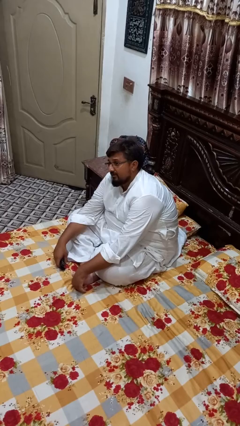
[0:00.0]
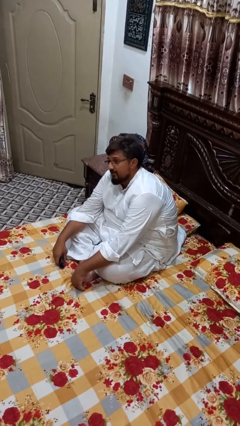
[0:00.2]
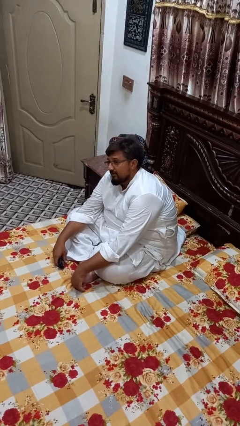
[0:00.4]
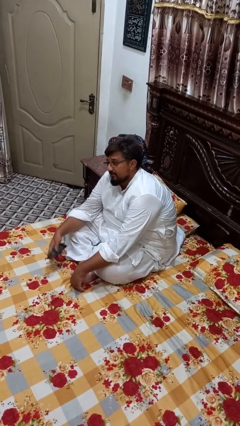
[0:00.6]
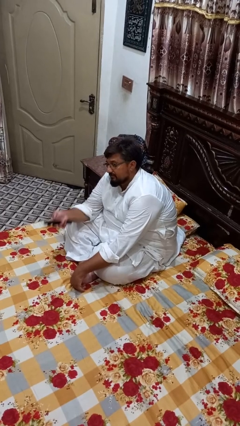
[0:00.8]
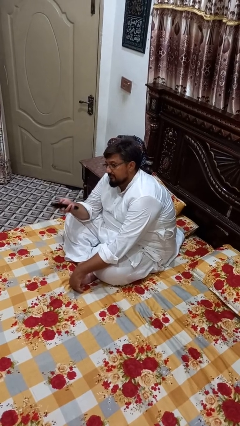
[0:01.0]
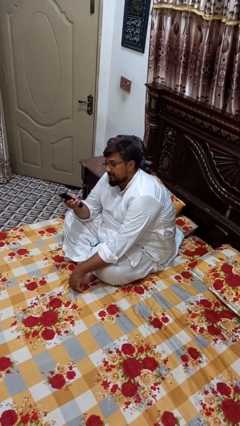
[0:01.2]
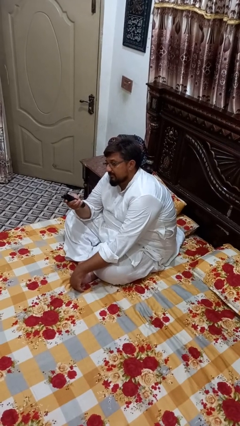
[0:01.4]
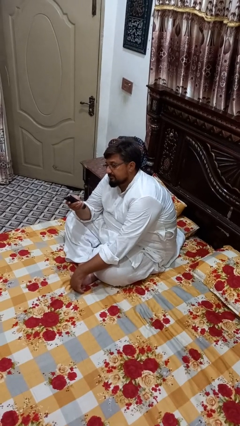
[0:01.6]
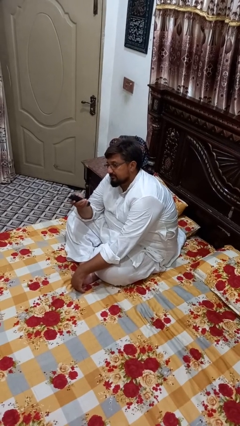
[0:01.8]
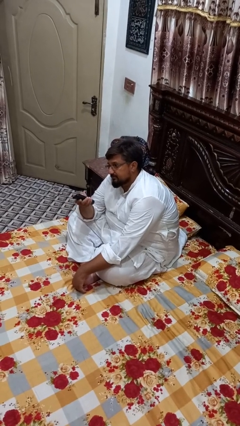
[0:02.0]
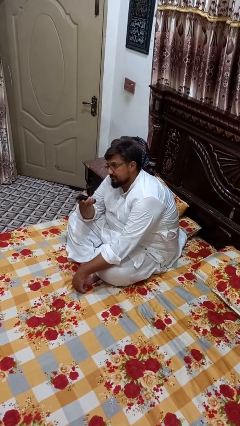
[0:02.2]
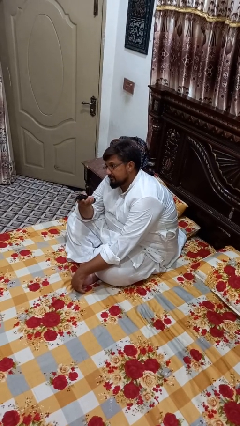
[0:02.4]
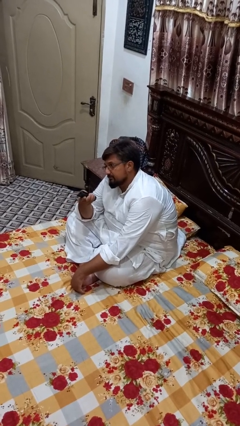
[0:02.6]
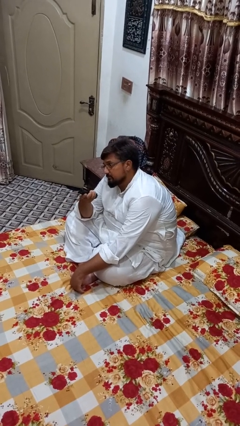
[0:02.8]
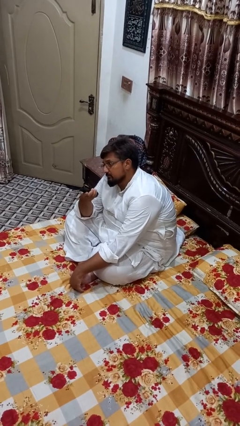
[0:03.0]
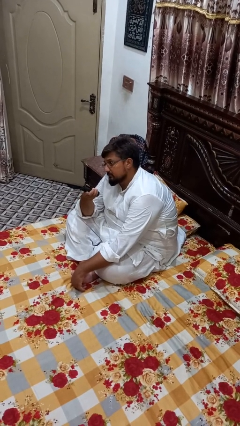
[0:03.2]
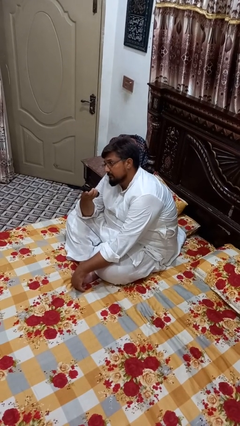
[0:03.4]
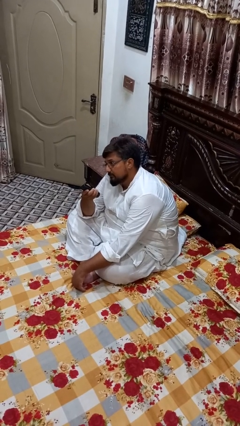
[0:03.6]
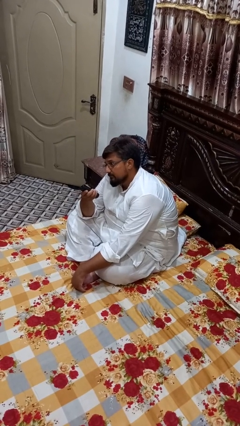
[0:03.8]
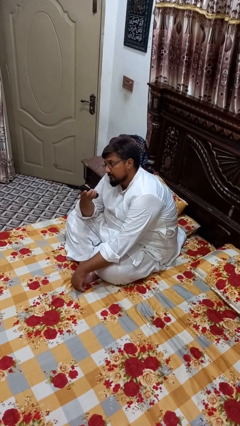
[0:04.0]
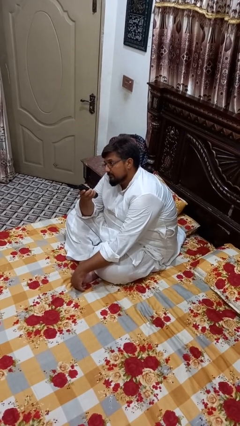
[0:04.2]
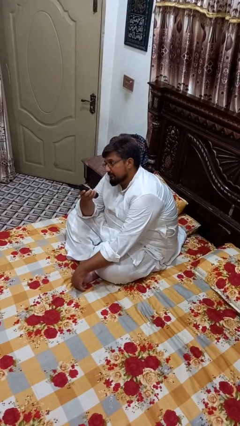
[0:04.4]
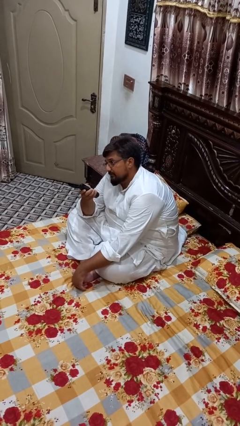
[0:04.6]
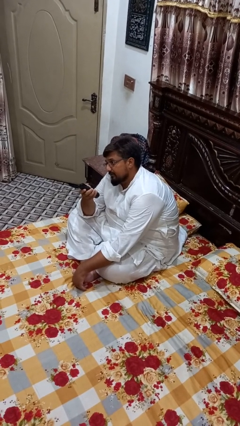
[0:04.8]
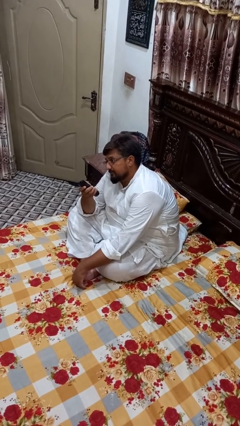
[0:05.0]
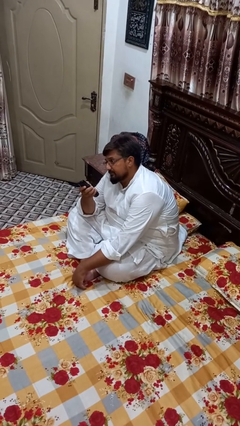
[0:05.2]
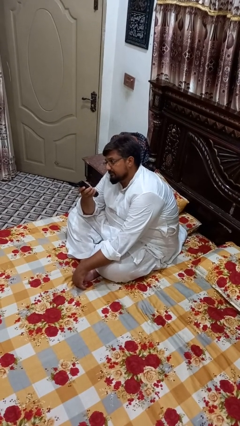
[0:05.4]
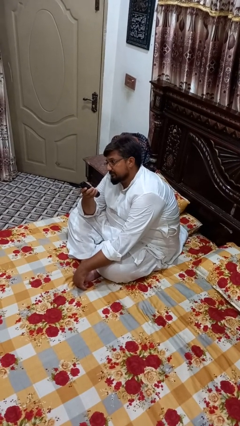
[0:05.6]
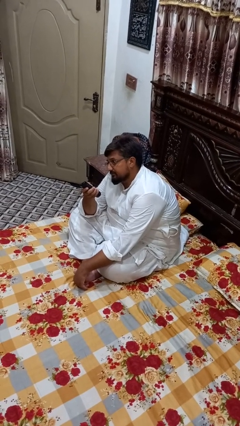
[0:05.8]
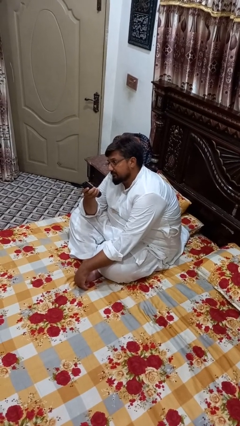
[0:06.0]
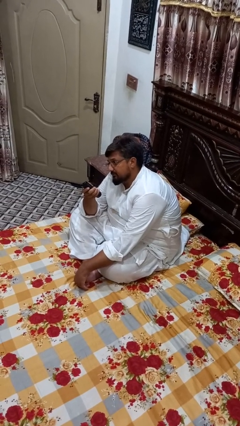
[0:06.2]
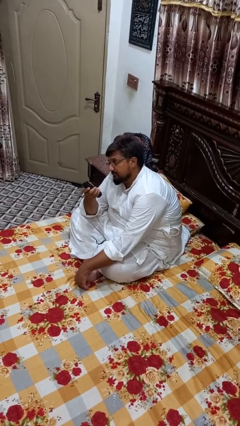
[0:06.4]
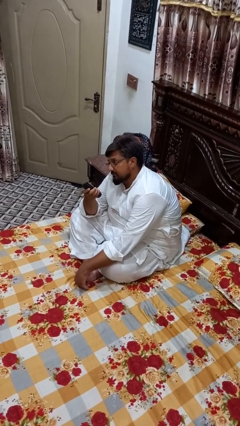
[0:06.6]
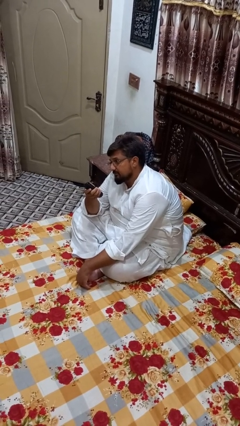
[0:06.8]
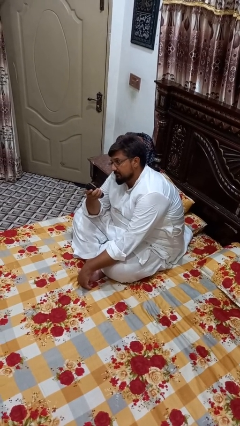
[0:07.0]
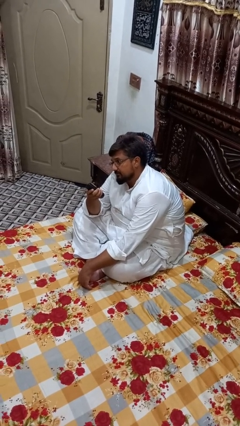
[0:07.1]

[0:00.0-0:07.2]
person uses television remote

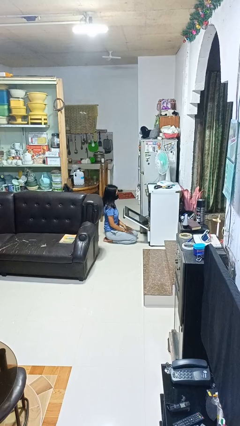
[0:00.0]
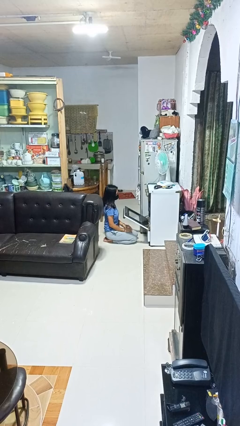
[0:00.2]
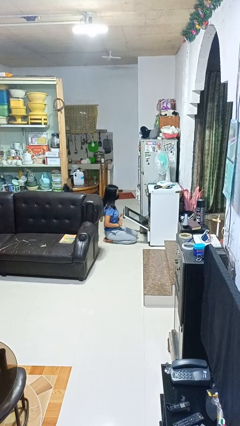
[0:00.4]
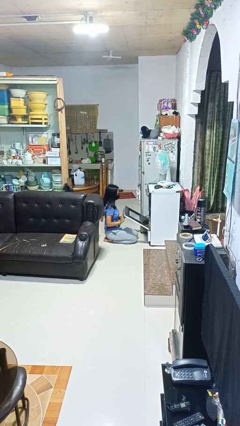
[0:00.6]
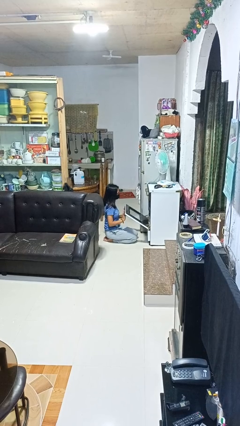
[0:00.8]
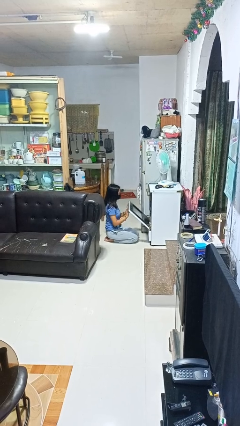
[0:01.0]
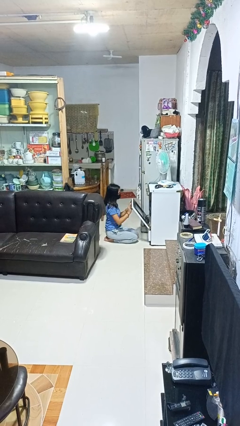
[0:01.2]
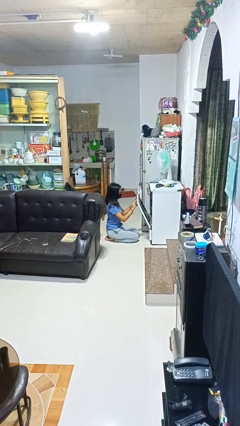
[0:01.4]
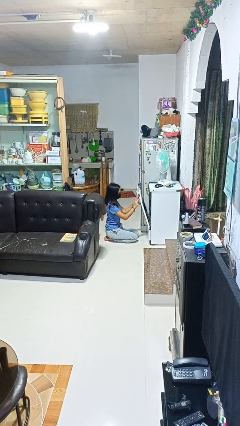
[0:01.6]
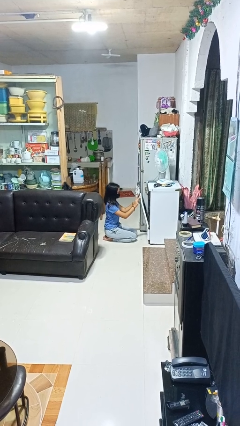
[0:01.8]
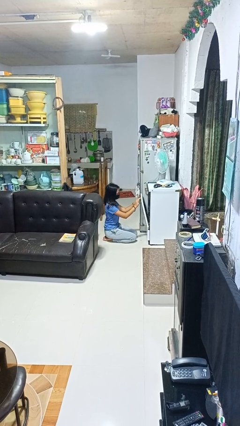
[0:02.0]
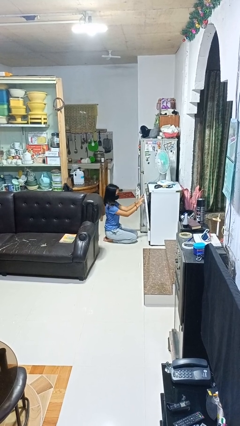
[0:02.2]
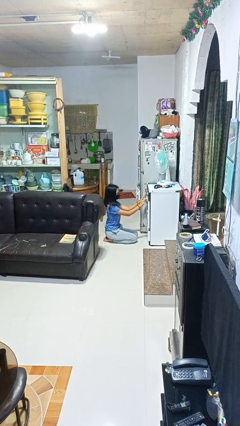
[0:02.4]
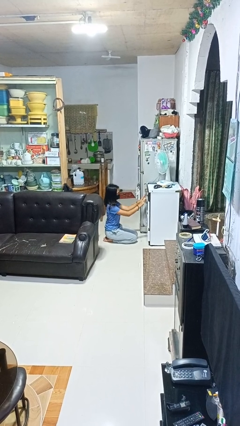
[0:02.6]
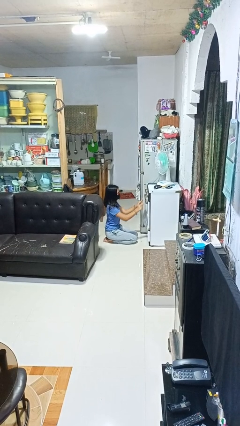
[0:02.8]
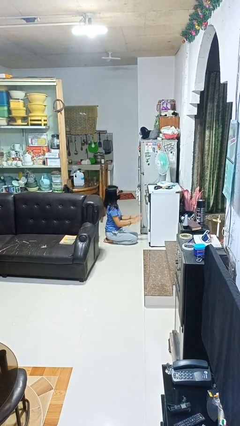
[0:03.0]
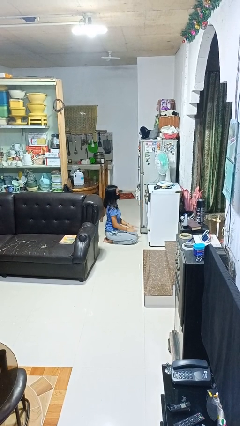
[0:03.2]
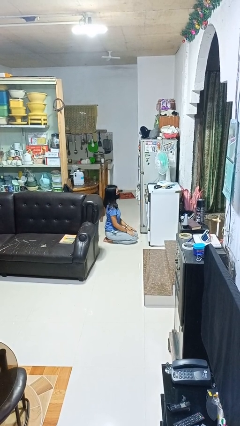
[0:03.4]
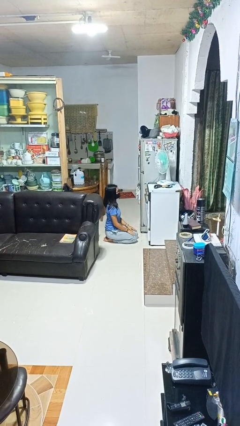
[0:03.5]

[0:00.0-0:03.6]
person closes oven door

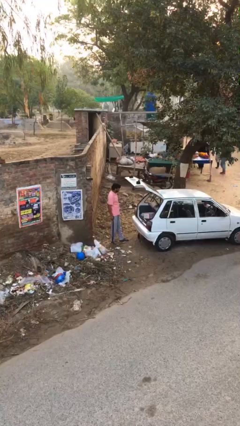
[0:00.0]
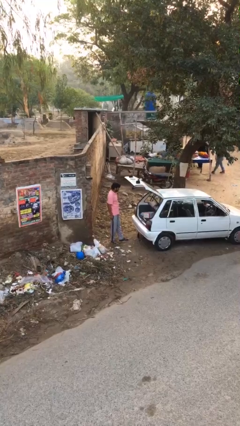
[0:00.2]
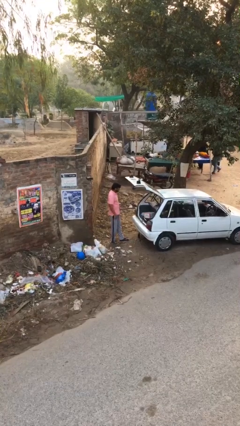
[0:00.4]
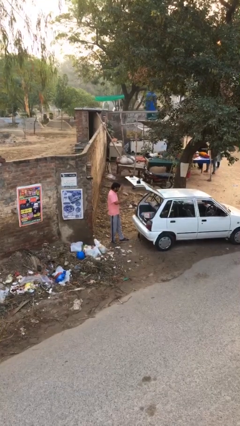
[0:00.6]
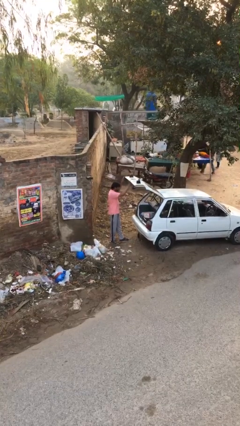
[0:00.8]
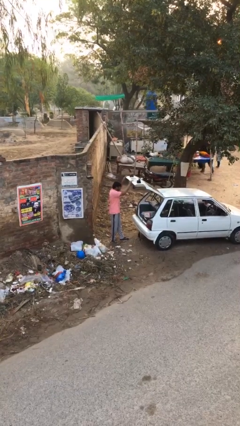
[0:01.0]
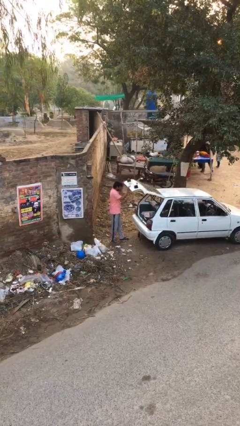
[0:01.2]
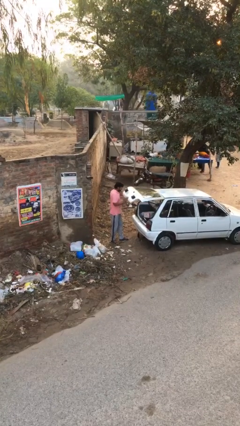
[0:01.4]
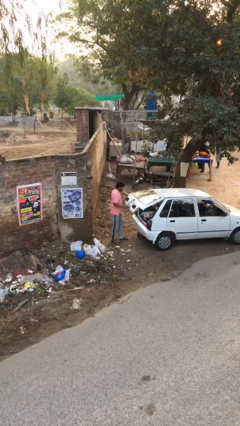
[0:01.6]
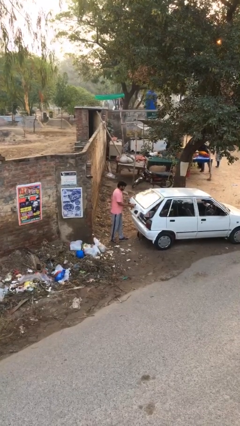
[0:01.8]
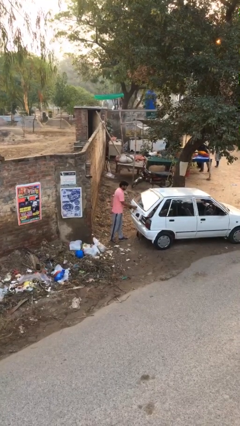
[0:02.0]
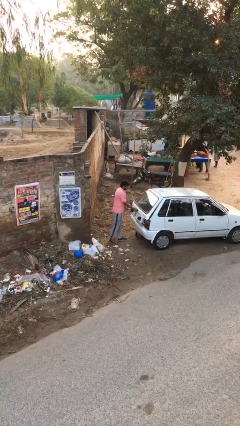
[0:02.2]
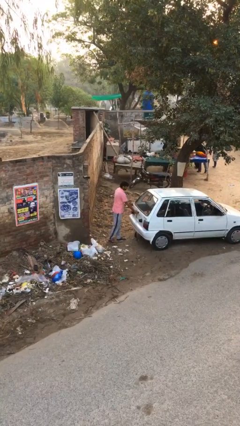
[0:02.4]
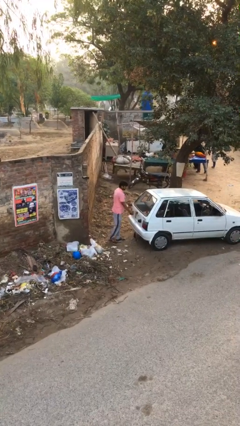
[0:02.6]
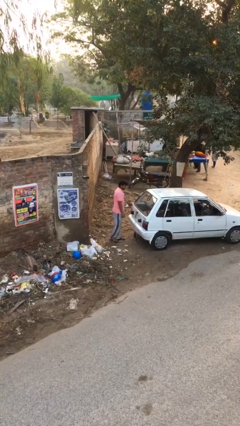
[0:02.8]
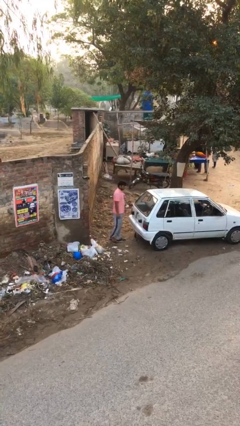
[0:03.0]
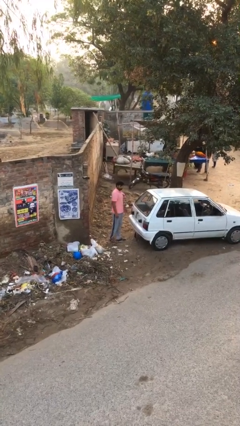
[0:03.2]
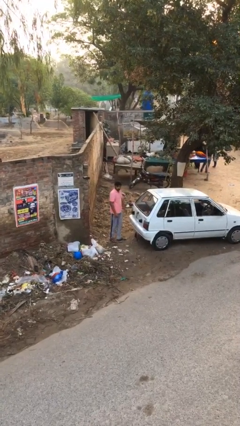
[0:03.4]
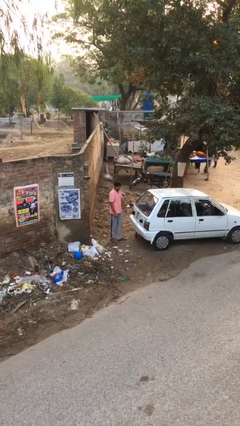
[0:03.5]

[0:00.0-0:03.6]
person closes car trunk

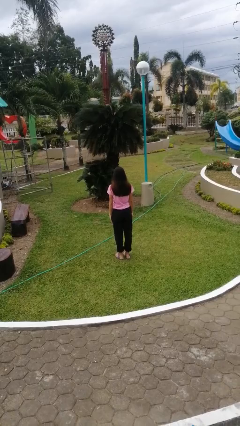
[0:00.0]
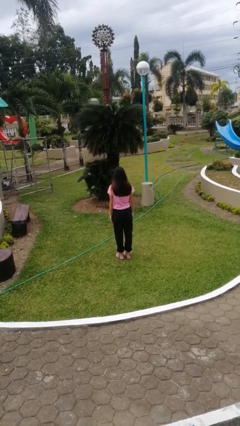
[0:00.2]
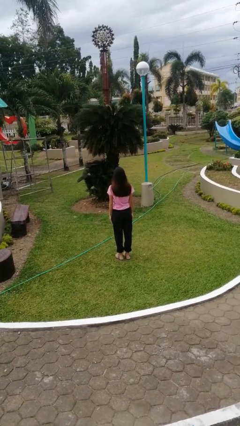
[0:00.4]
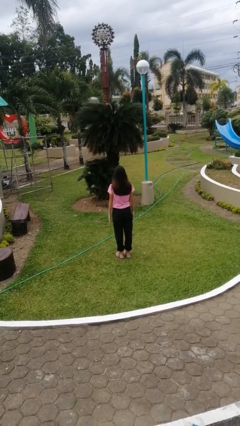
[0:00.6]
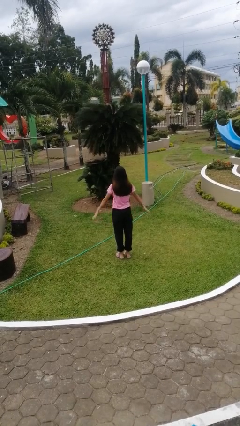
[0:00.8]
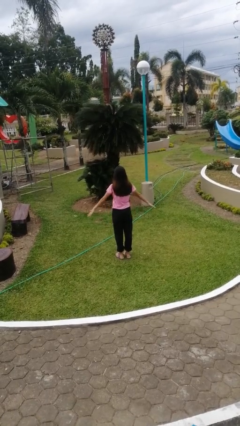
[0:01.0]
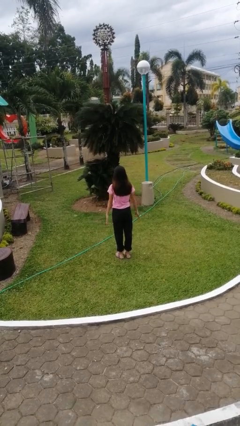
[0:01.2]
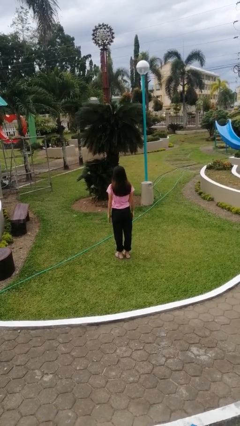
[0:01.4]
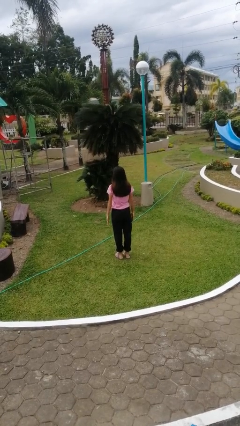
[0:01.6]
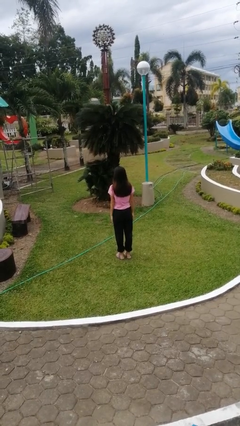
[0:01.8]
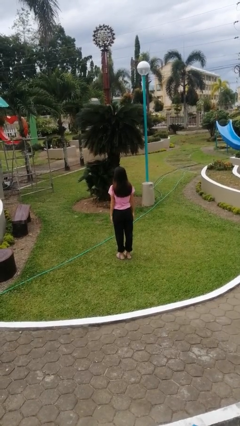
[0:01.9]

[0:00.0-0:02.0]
person slaps hands on thighs

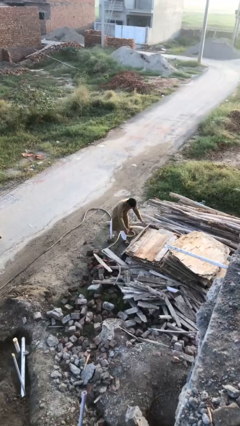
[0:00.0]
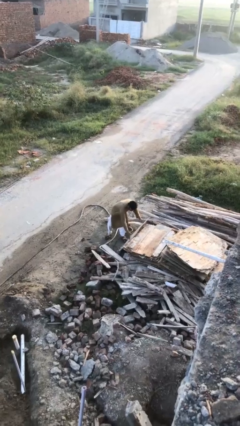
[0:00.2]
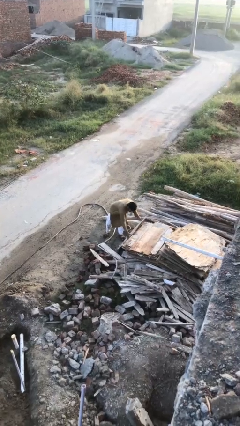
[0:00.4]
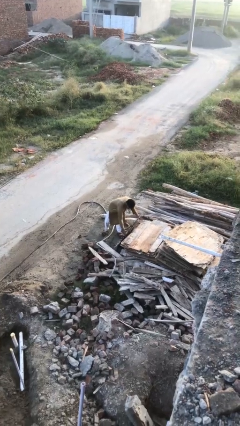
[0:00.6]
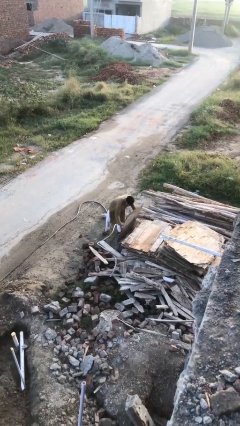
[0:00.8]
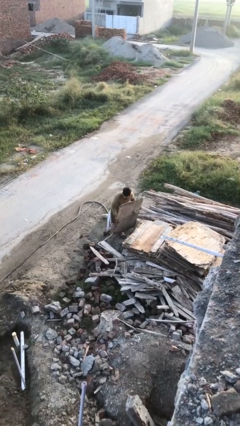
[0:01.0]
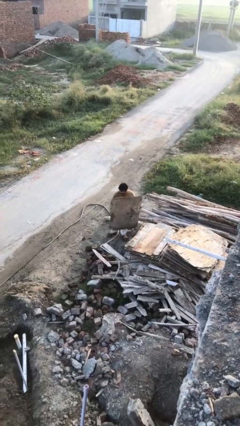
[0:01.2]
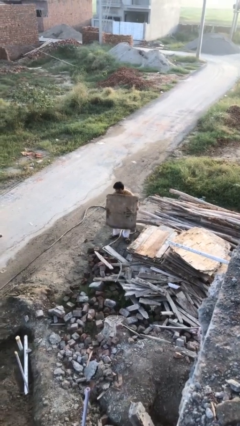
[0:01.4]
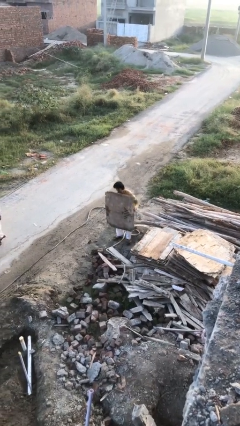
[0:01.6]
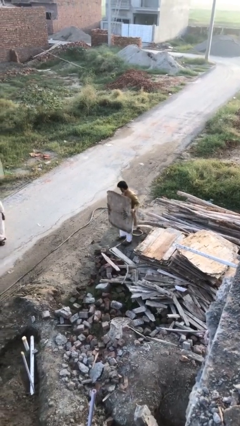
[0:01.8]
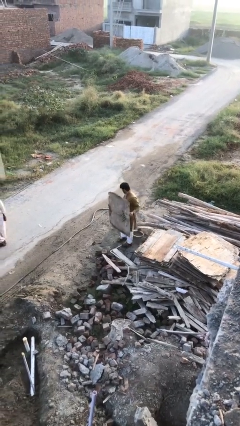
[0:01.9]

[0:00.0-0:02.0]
person picks up object from floor
